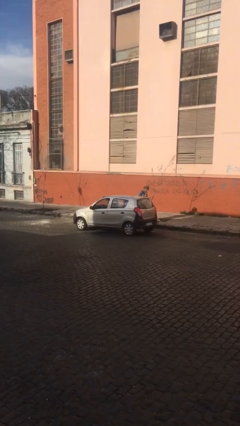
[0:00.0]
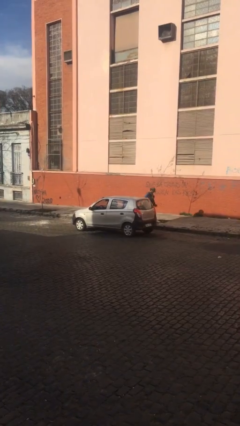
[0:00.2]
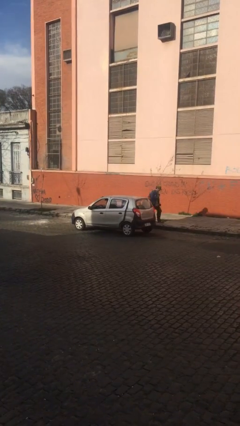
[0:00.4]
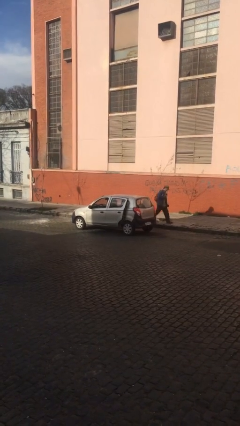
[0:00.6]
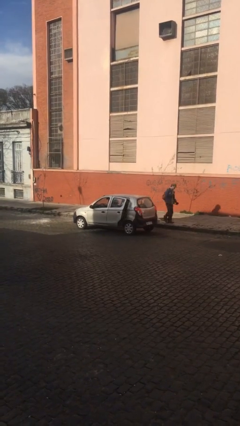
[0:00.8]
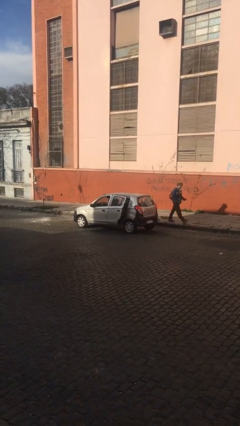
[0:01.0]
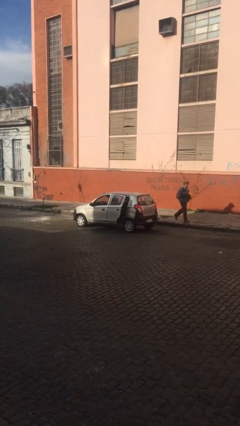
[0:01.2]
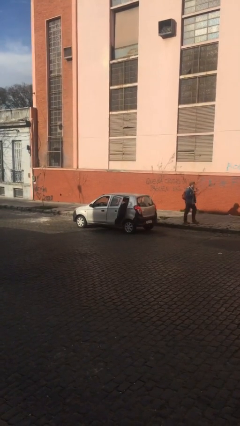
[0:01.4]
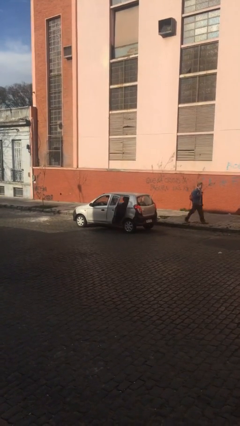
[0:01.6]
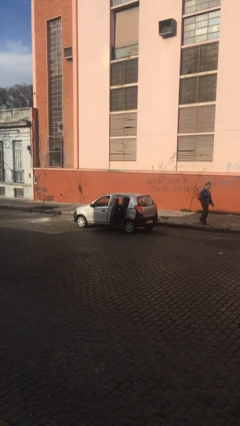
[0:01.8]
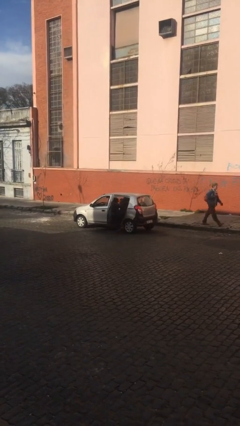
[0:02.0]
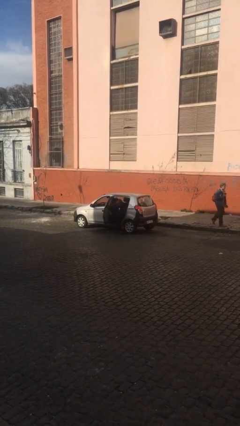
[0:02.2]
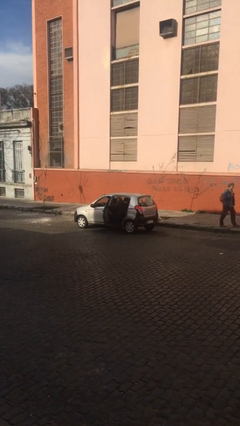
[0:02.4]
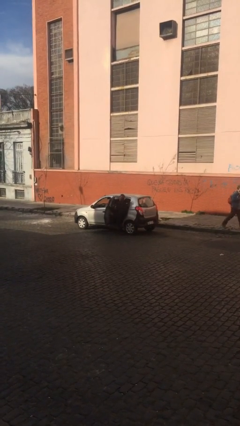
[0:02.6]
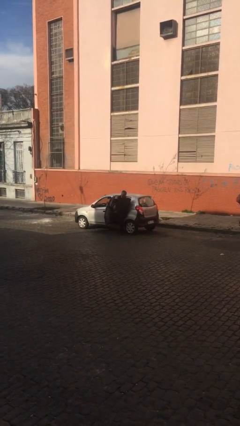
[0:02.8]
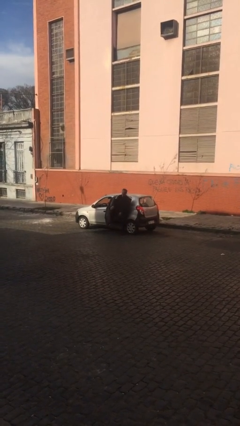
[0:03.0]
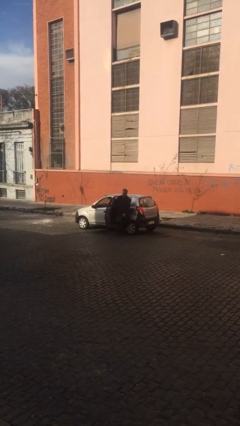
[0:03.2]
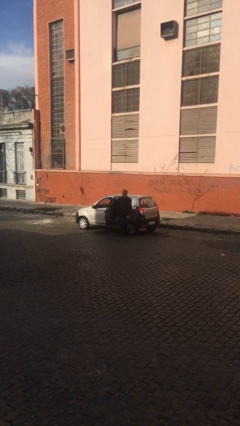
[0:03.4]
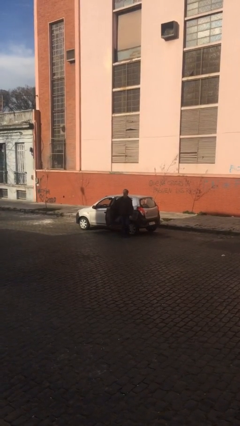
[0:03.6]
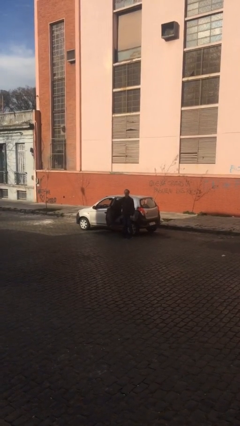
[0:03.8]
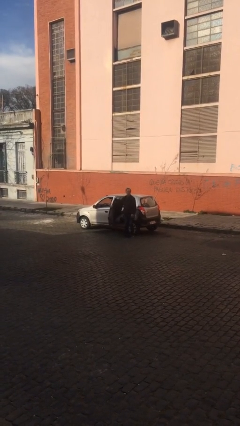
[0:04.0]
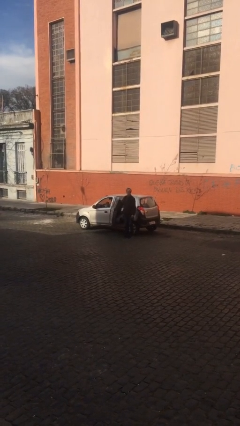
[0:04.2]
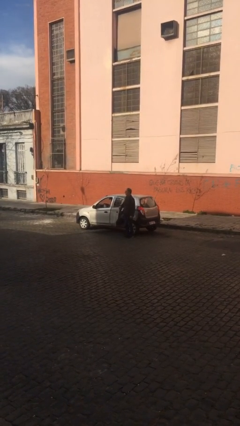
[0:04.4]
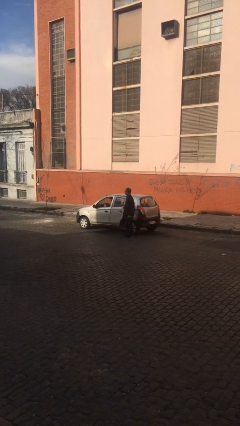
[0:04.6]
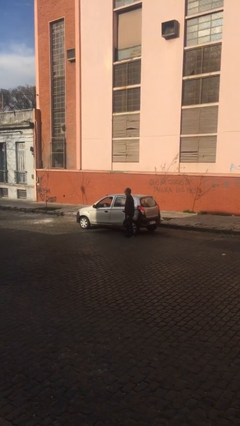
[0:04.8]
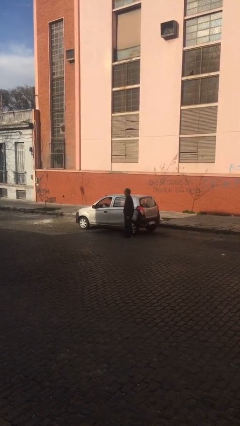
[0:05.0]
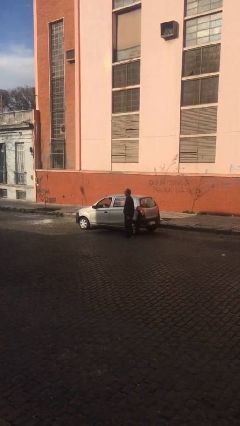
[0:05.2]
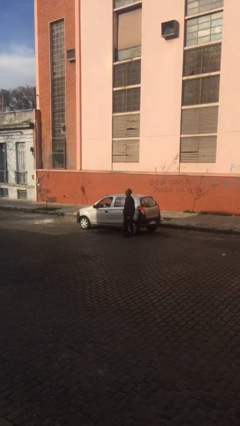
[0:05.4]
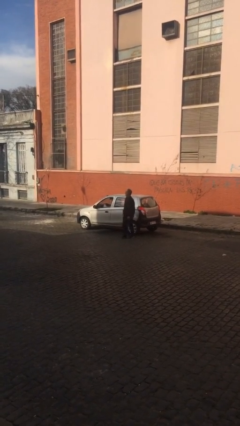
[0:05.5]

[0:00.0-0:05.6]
car drops off person

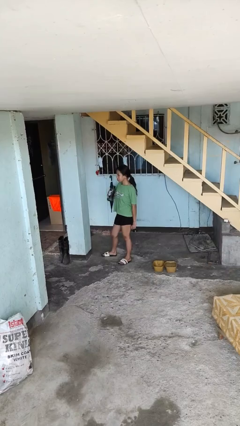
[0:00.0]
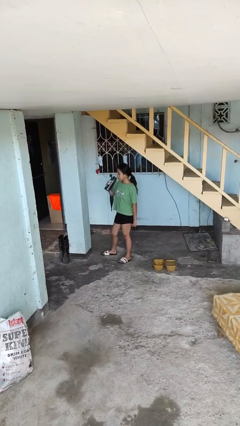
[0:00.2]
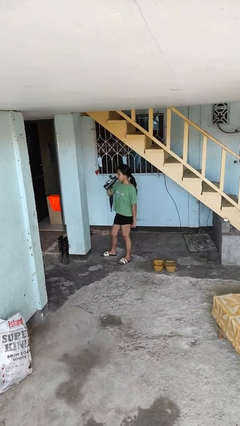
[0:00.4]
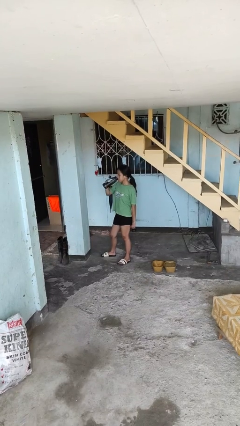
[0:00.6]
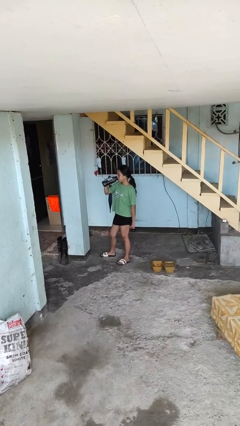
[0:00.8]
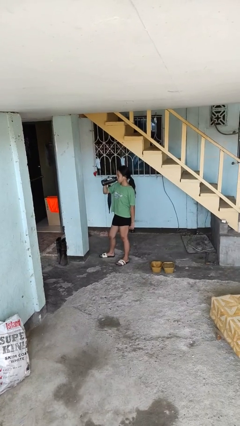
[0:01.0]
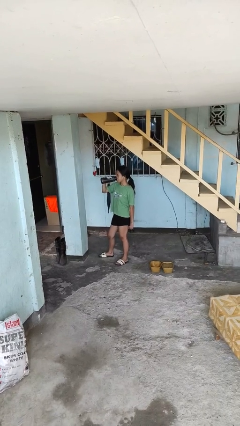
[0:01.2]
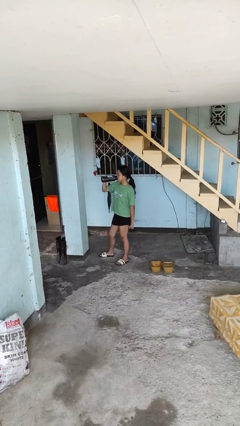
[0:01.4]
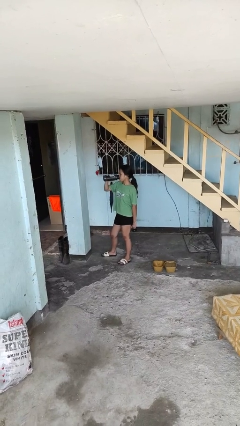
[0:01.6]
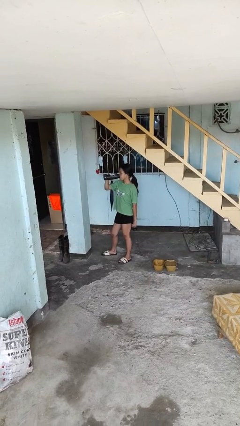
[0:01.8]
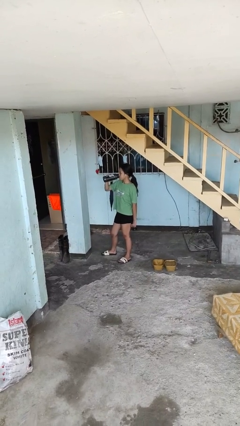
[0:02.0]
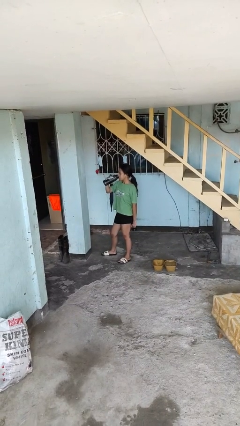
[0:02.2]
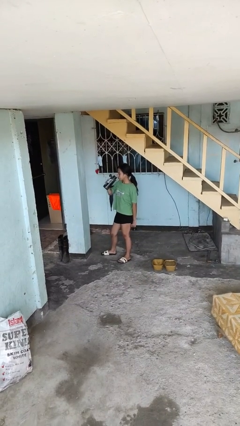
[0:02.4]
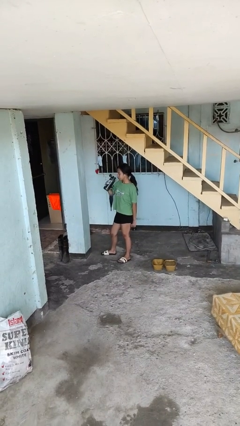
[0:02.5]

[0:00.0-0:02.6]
person drinks from bottle

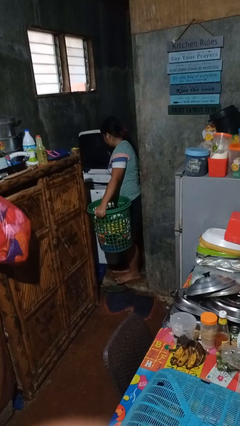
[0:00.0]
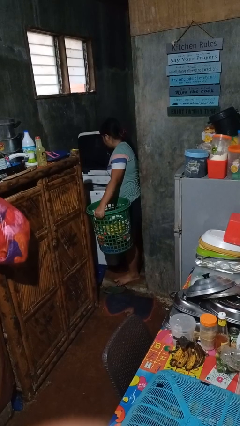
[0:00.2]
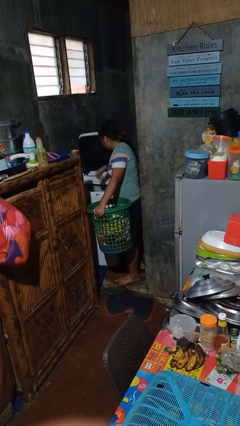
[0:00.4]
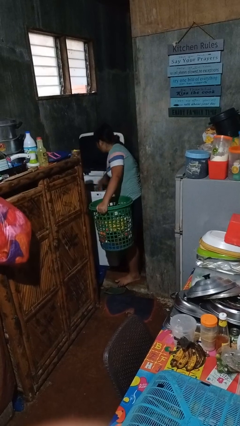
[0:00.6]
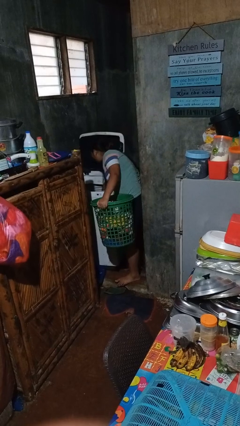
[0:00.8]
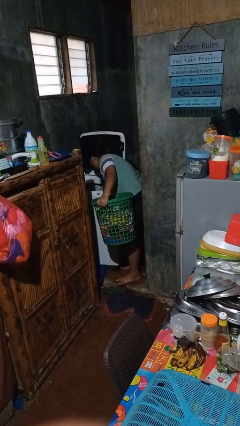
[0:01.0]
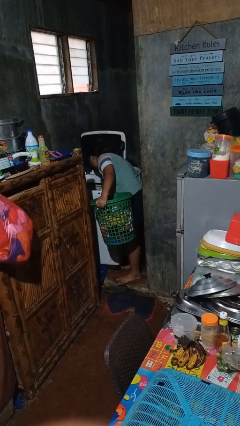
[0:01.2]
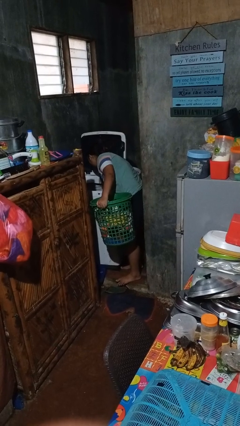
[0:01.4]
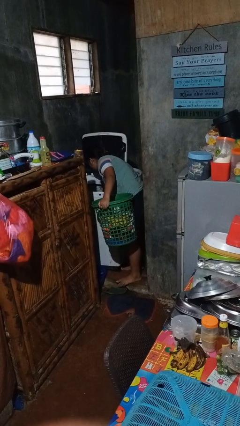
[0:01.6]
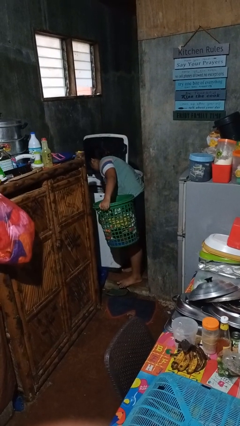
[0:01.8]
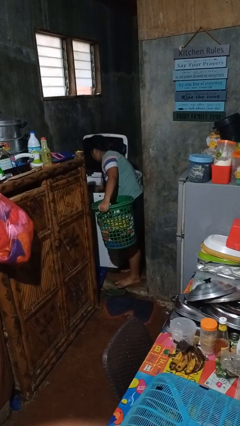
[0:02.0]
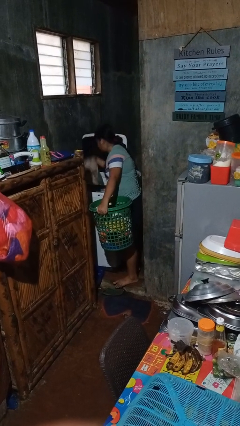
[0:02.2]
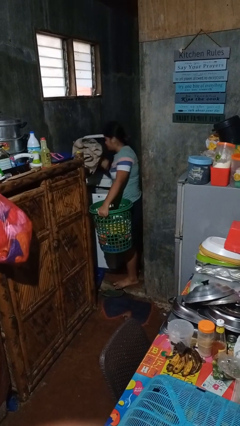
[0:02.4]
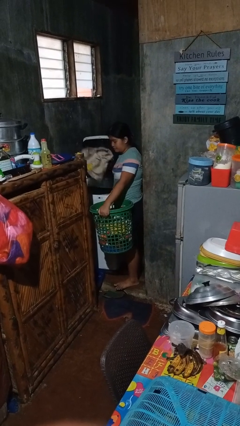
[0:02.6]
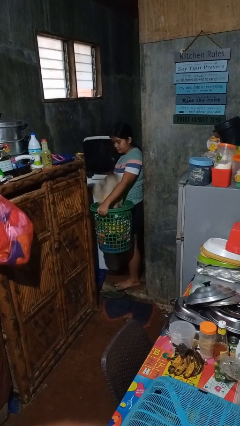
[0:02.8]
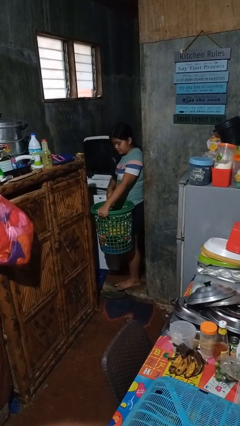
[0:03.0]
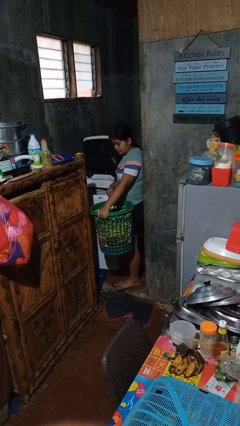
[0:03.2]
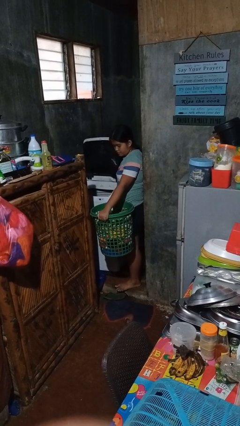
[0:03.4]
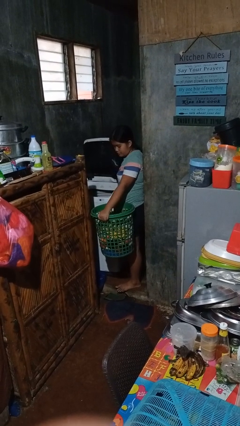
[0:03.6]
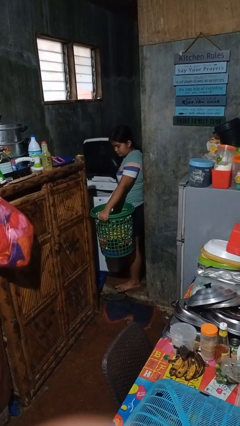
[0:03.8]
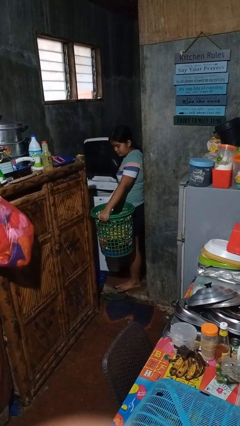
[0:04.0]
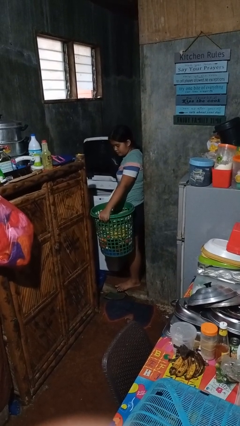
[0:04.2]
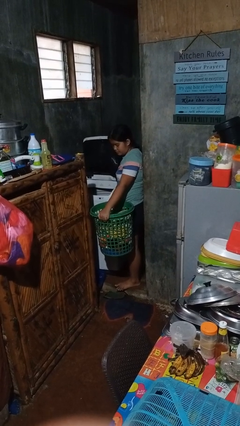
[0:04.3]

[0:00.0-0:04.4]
person unloads clotheswasher

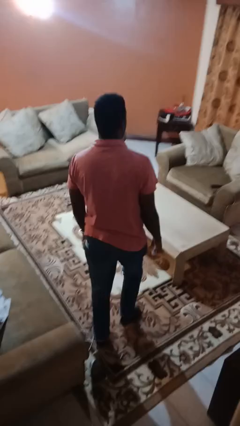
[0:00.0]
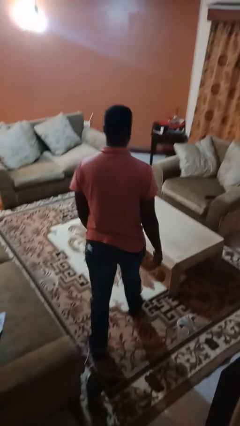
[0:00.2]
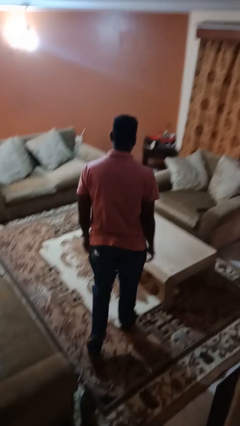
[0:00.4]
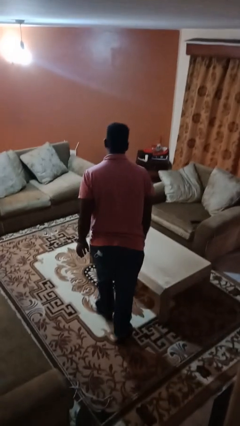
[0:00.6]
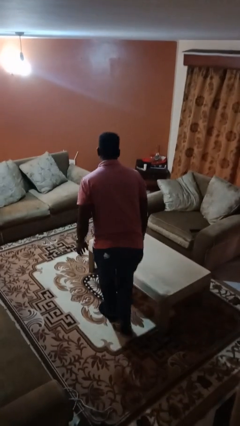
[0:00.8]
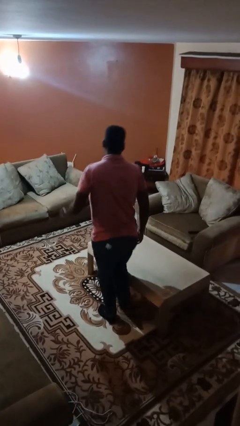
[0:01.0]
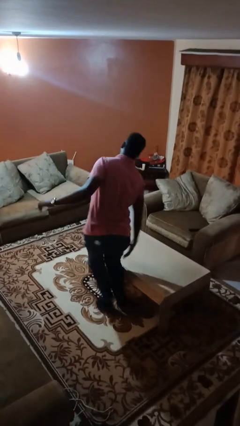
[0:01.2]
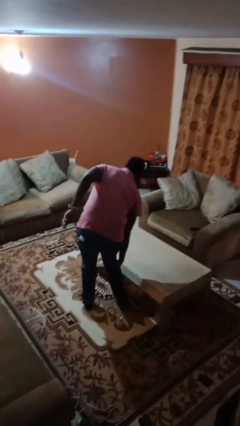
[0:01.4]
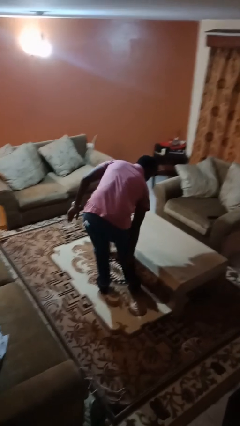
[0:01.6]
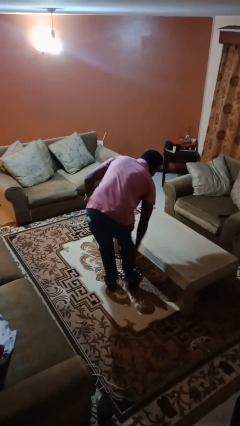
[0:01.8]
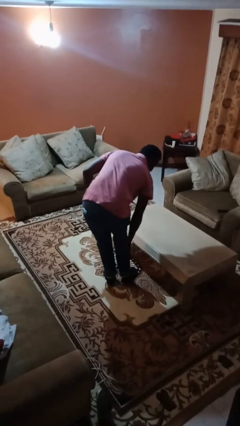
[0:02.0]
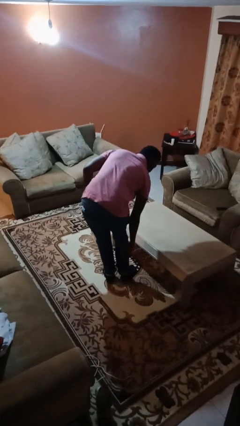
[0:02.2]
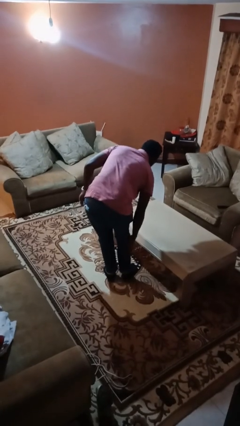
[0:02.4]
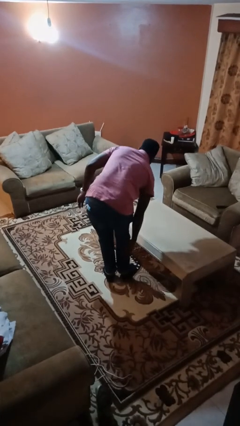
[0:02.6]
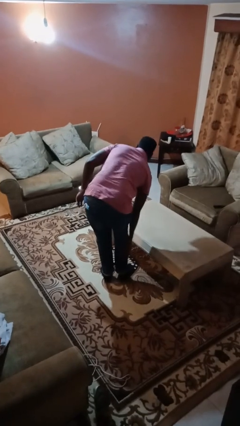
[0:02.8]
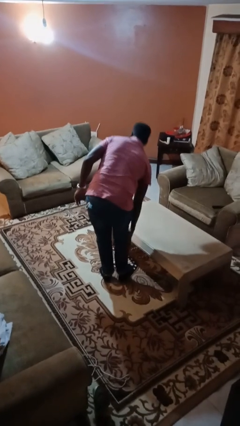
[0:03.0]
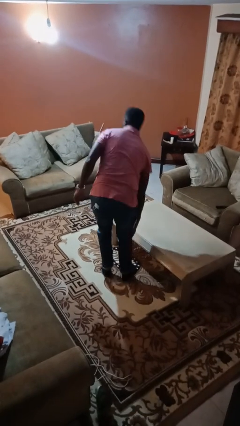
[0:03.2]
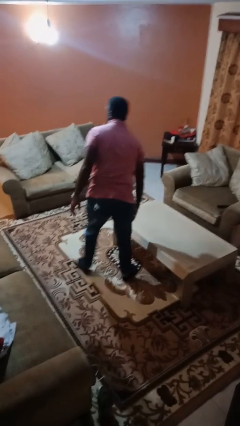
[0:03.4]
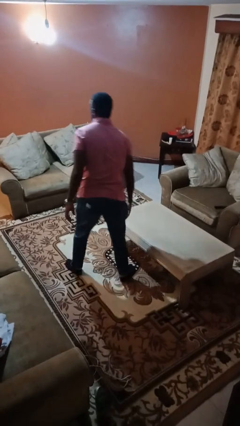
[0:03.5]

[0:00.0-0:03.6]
person bumps into table

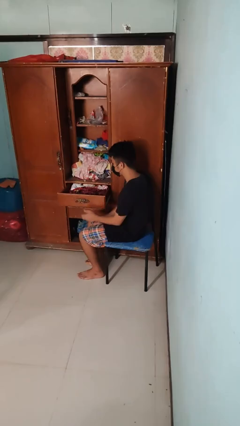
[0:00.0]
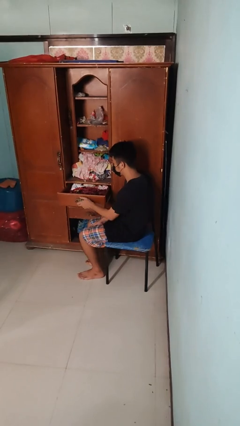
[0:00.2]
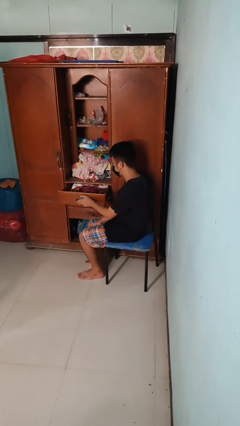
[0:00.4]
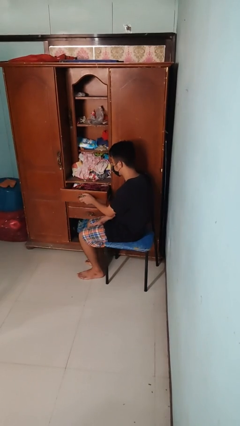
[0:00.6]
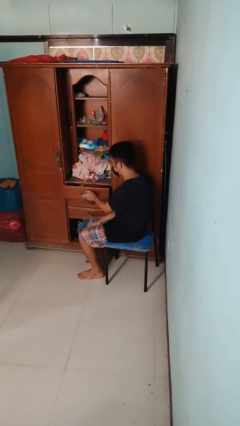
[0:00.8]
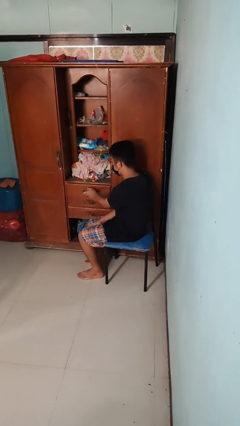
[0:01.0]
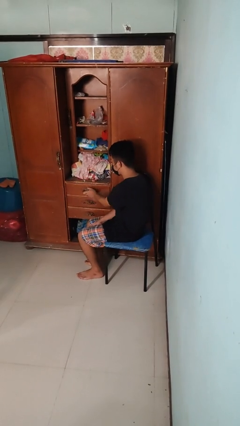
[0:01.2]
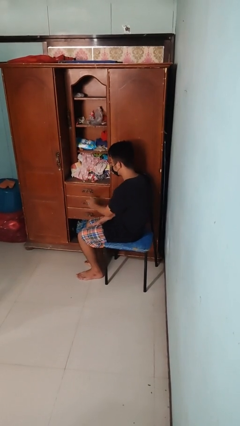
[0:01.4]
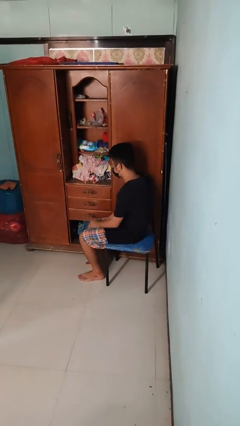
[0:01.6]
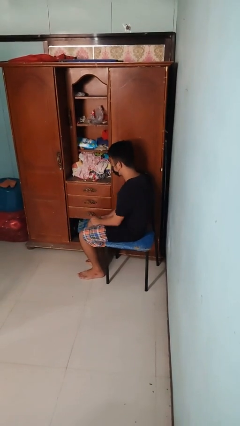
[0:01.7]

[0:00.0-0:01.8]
person closes dresser drawer
